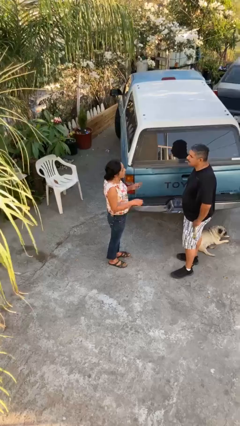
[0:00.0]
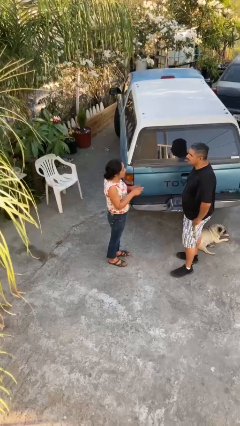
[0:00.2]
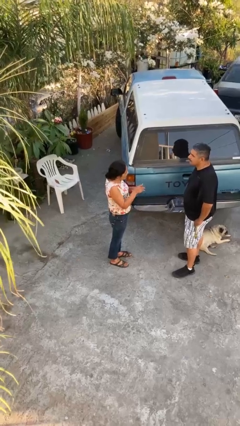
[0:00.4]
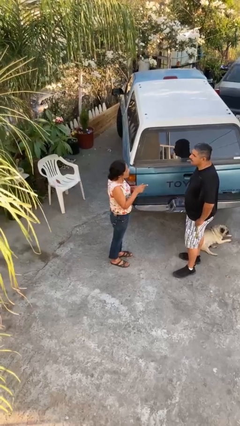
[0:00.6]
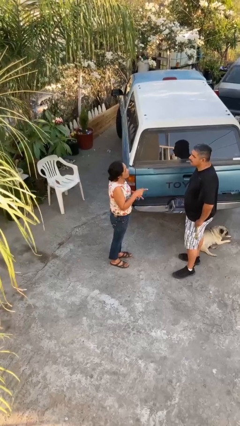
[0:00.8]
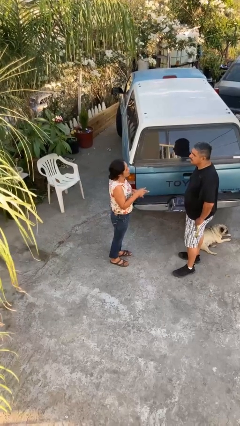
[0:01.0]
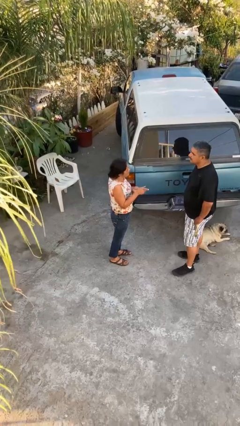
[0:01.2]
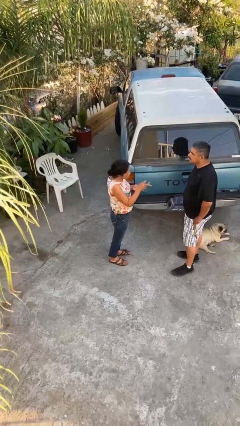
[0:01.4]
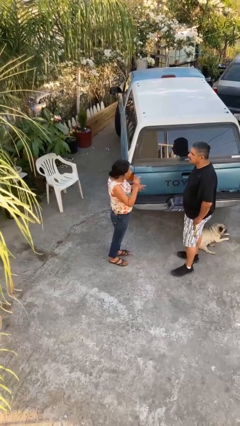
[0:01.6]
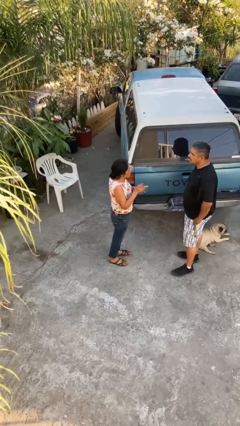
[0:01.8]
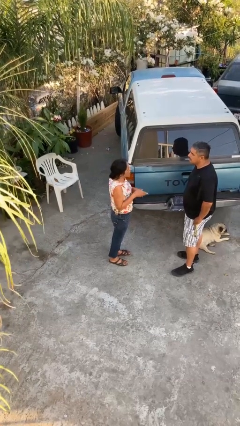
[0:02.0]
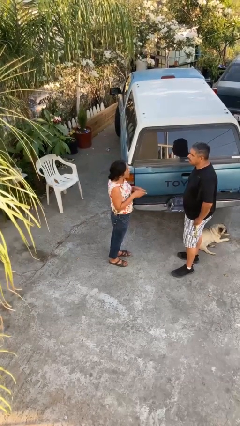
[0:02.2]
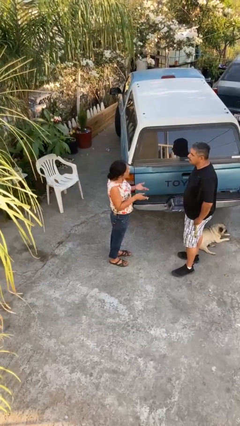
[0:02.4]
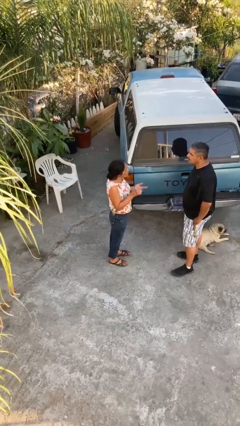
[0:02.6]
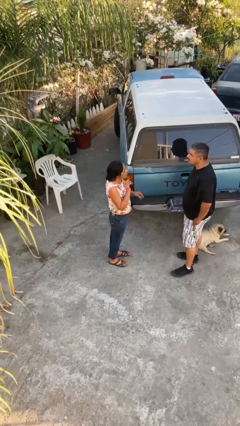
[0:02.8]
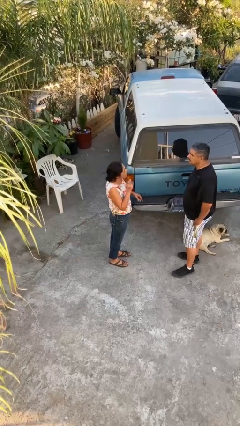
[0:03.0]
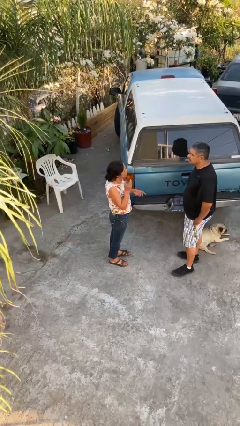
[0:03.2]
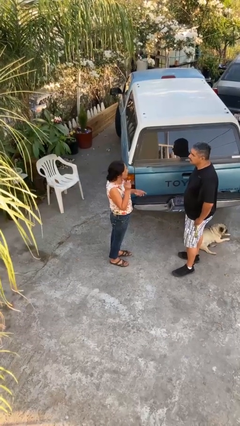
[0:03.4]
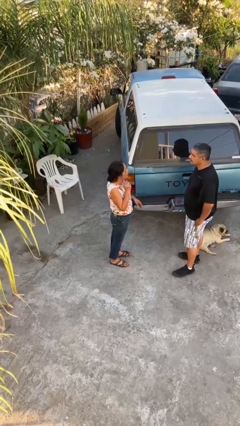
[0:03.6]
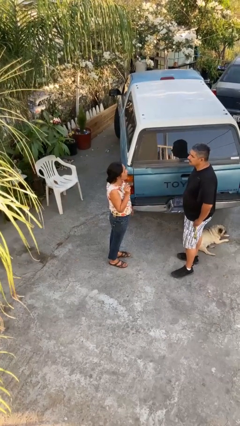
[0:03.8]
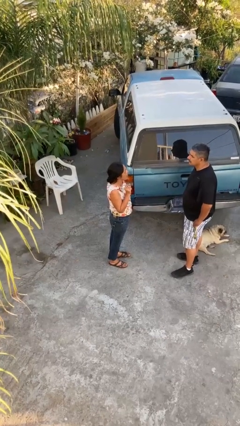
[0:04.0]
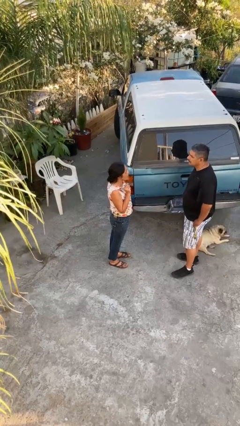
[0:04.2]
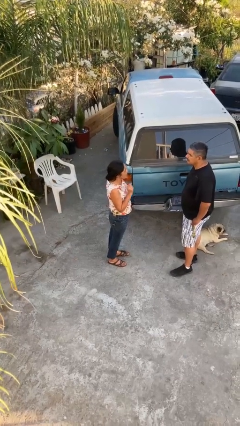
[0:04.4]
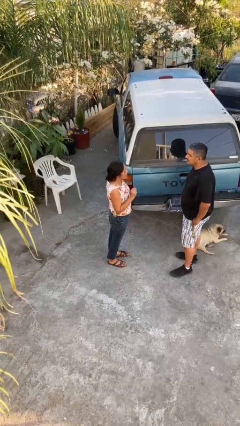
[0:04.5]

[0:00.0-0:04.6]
person talks to person

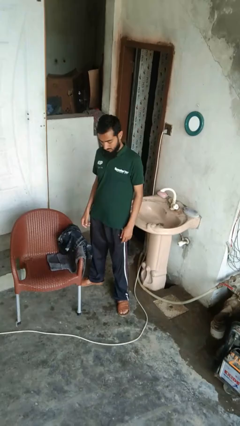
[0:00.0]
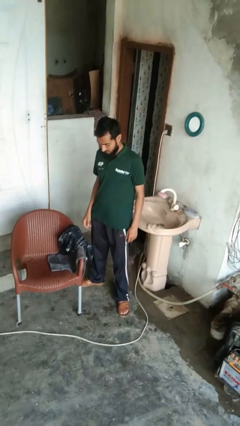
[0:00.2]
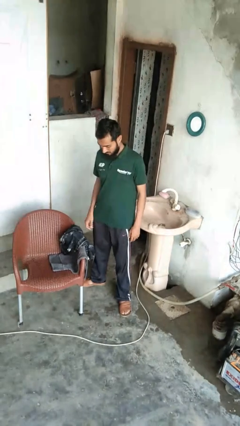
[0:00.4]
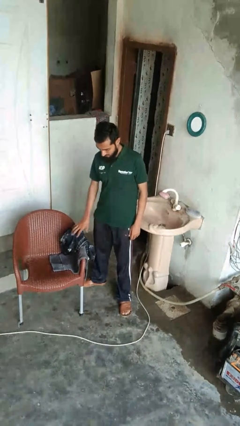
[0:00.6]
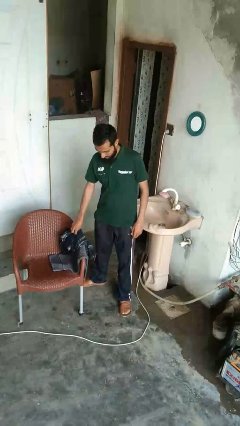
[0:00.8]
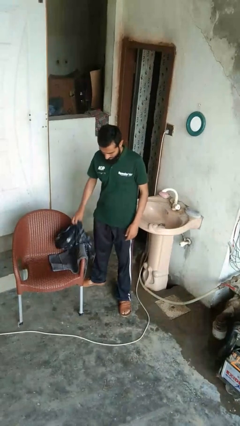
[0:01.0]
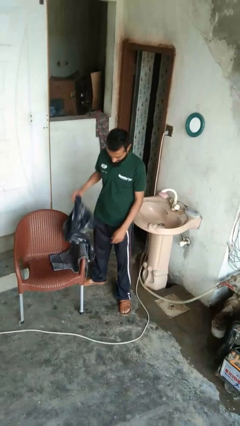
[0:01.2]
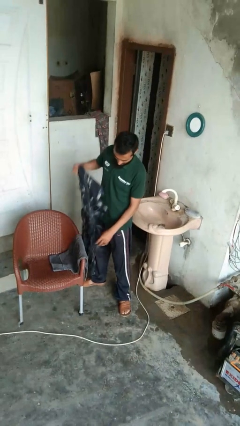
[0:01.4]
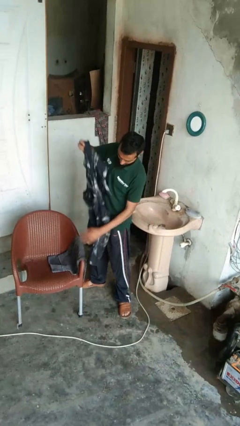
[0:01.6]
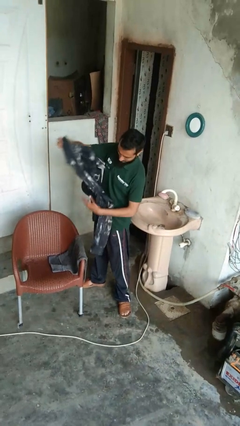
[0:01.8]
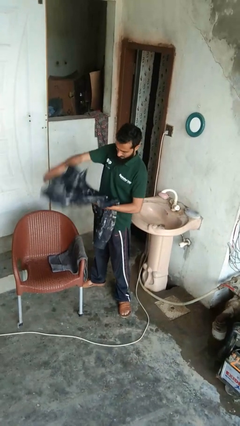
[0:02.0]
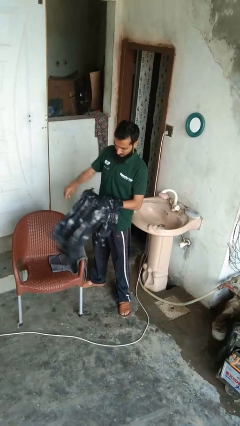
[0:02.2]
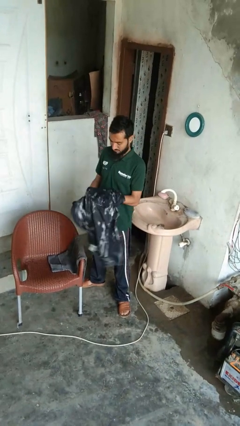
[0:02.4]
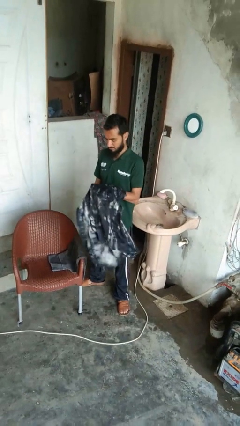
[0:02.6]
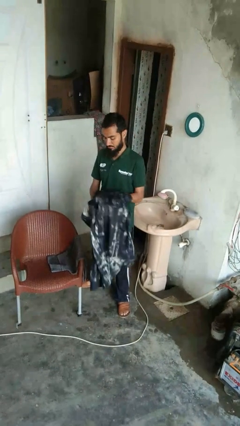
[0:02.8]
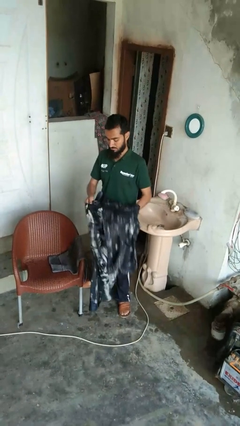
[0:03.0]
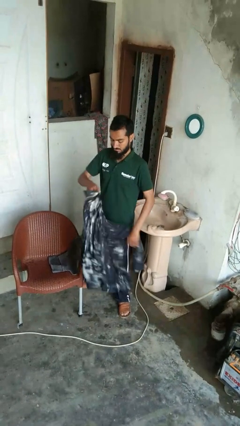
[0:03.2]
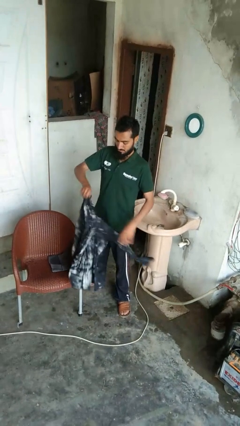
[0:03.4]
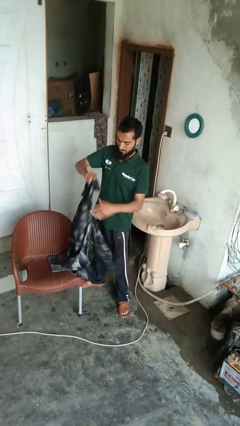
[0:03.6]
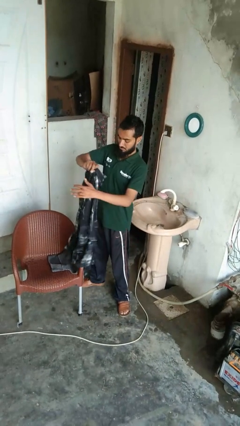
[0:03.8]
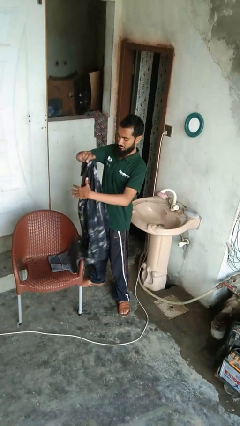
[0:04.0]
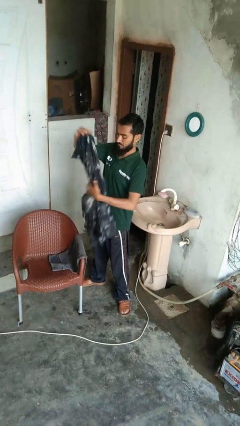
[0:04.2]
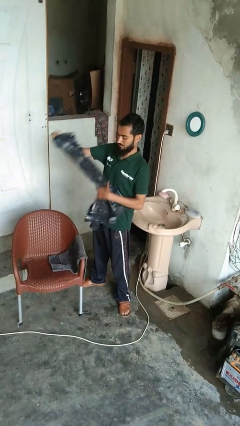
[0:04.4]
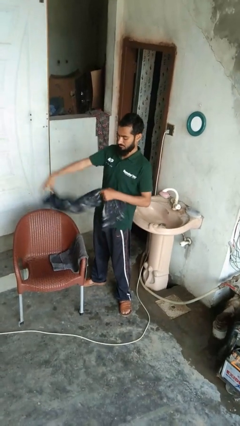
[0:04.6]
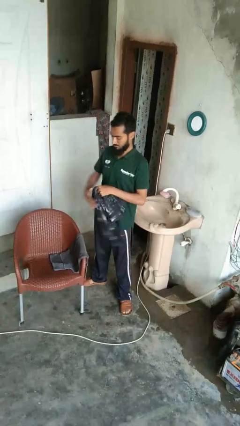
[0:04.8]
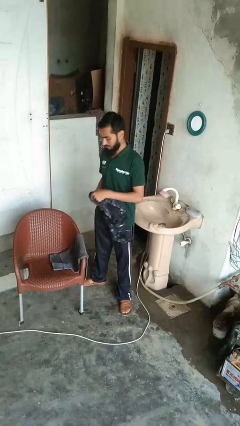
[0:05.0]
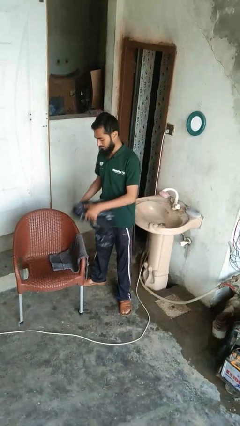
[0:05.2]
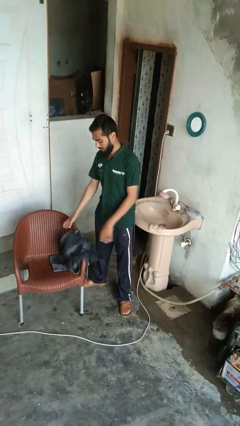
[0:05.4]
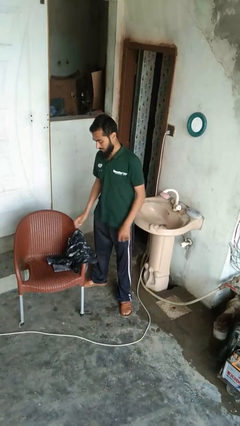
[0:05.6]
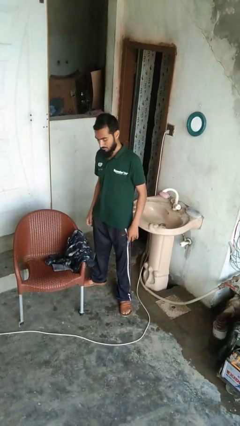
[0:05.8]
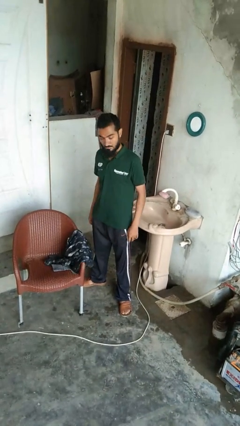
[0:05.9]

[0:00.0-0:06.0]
person folds shirt

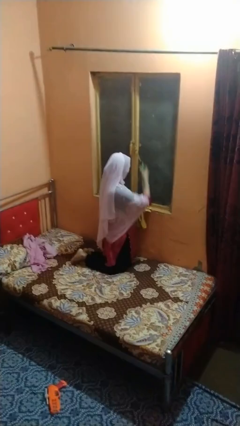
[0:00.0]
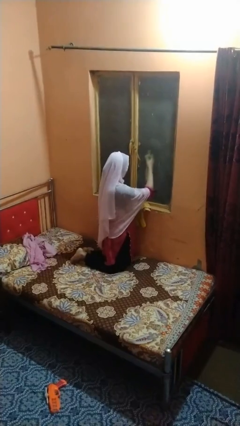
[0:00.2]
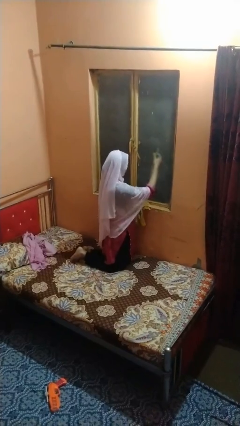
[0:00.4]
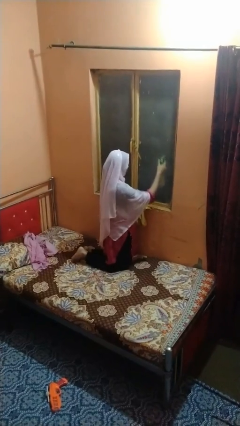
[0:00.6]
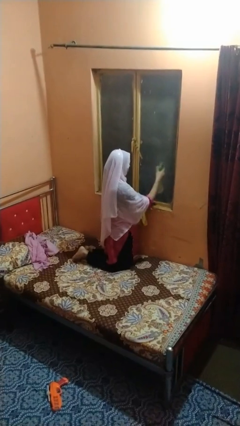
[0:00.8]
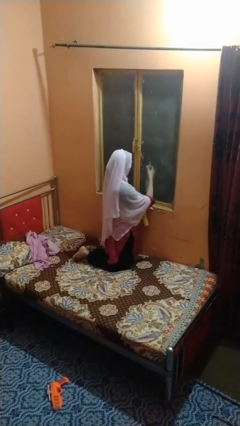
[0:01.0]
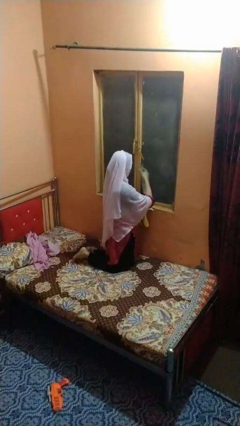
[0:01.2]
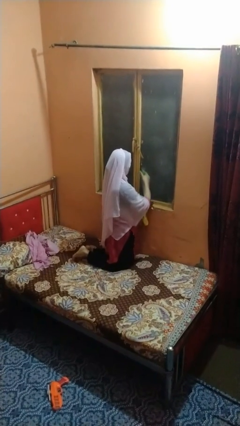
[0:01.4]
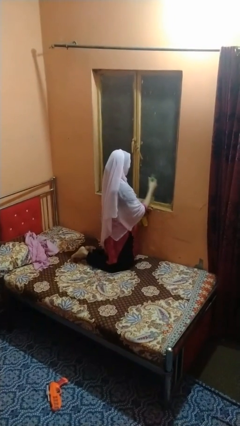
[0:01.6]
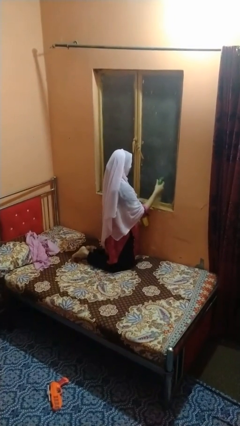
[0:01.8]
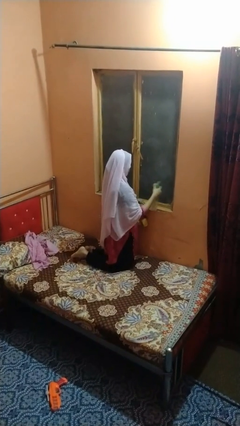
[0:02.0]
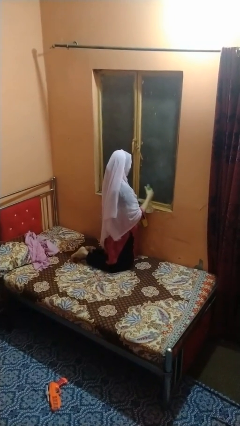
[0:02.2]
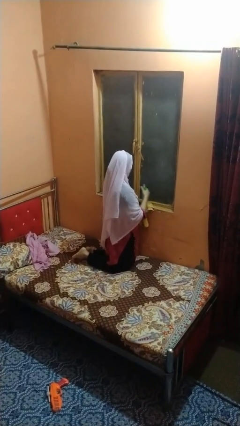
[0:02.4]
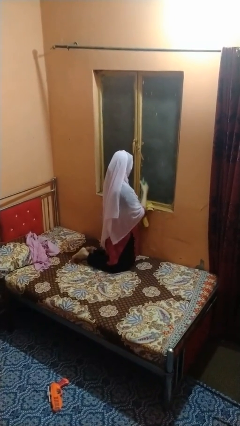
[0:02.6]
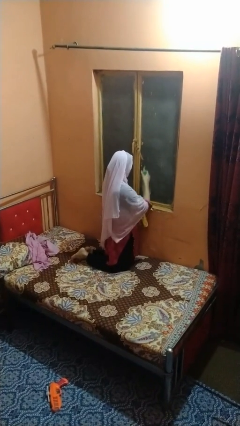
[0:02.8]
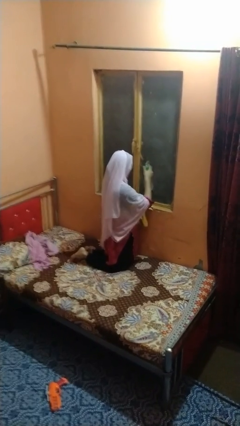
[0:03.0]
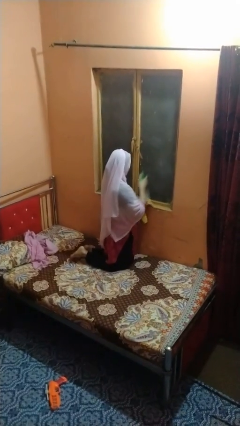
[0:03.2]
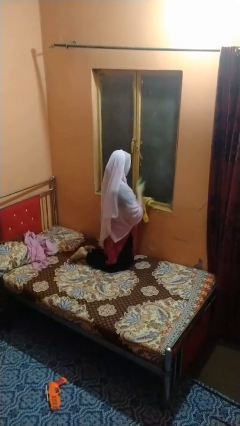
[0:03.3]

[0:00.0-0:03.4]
person sprays from bottle

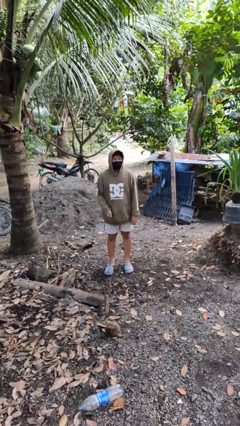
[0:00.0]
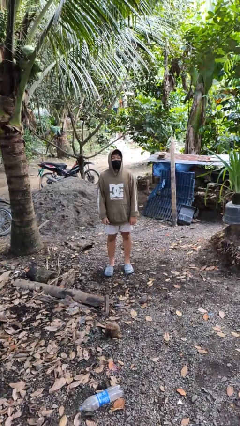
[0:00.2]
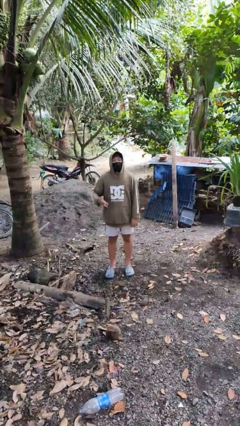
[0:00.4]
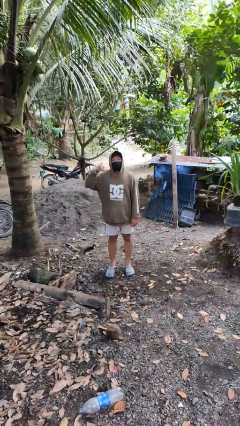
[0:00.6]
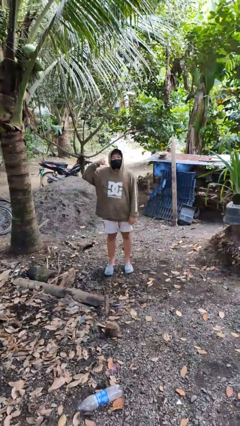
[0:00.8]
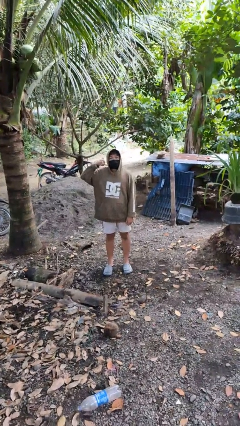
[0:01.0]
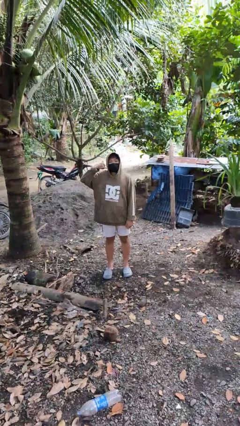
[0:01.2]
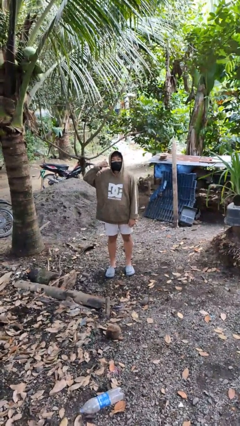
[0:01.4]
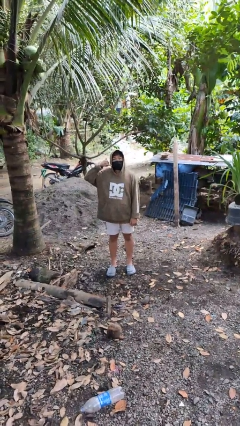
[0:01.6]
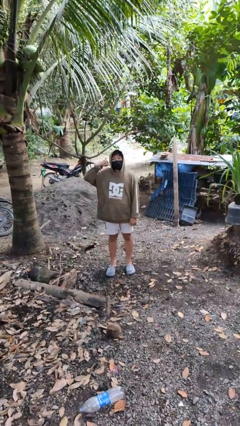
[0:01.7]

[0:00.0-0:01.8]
person gestures call me

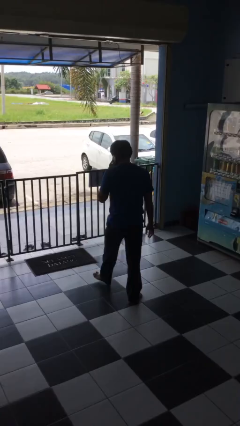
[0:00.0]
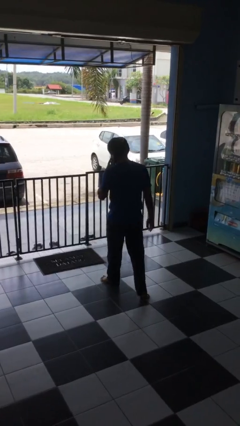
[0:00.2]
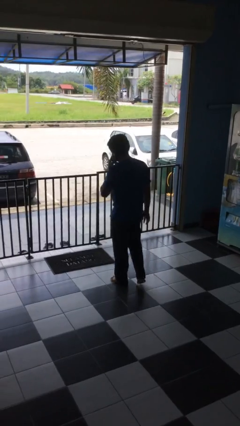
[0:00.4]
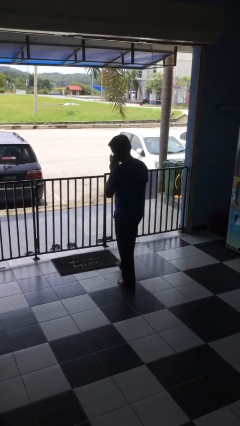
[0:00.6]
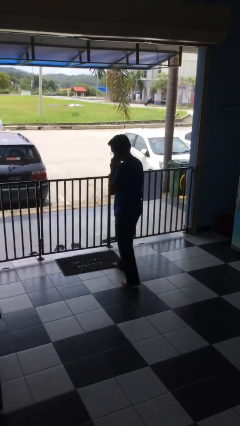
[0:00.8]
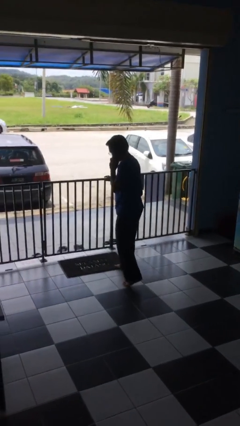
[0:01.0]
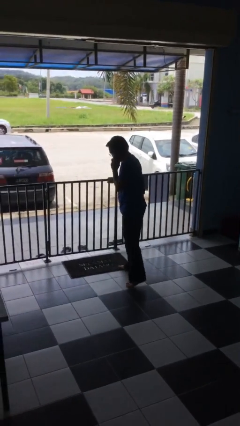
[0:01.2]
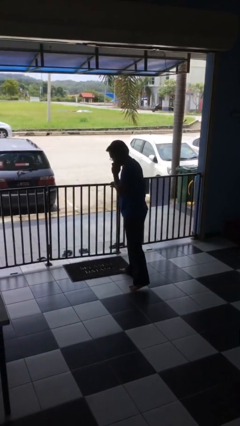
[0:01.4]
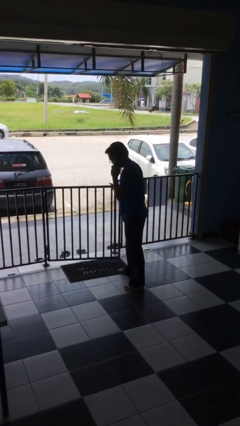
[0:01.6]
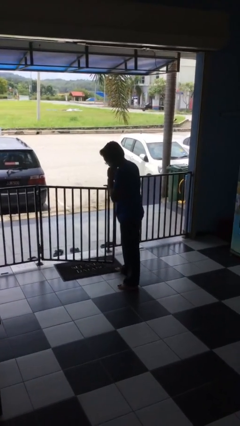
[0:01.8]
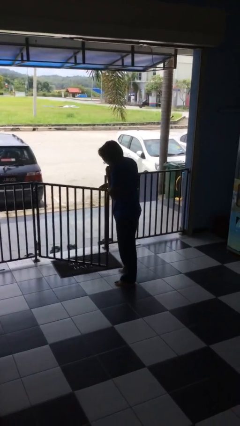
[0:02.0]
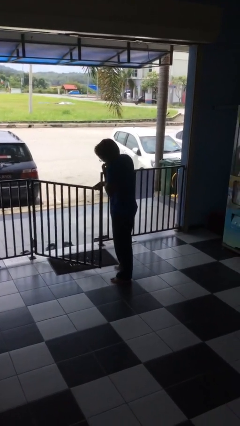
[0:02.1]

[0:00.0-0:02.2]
person opens facility door
